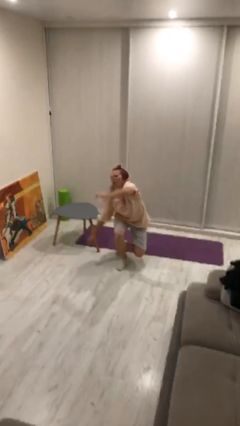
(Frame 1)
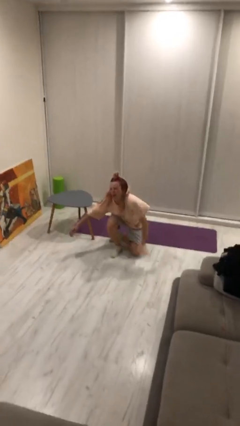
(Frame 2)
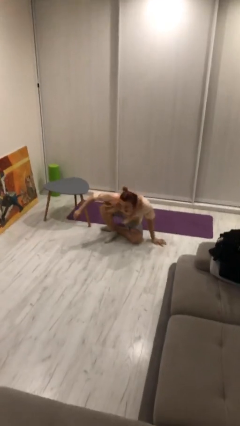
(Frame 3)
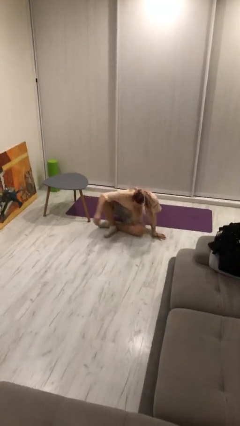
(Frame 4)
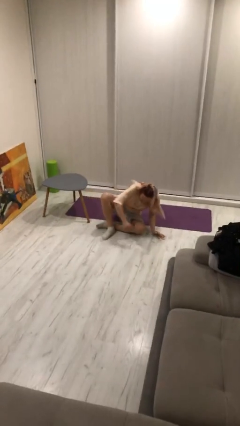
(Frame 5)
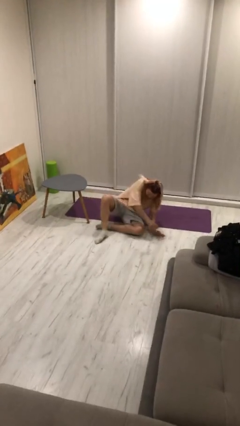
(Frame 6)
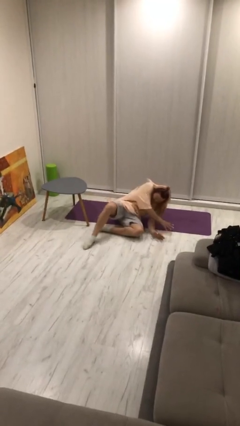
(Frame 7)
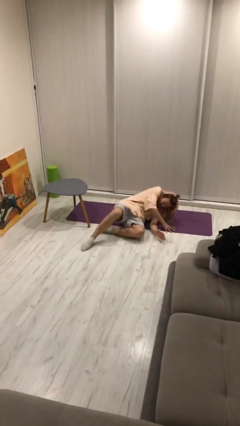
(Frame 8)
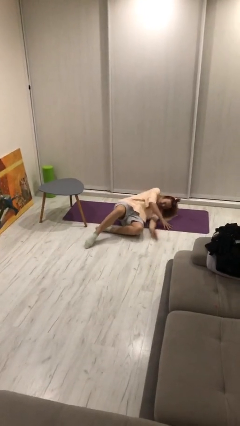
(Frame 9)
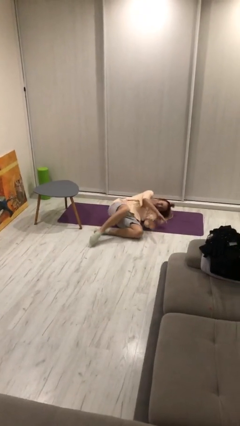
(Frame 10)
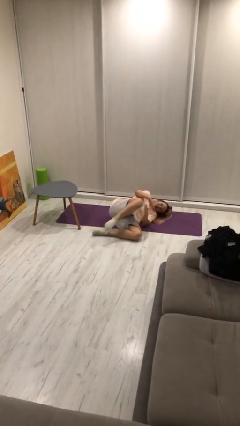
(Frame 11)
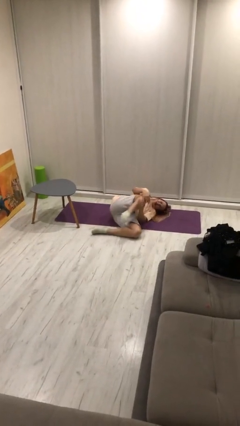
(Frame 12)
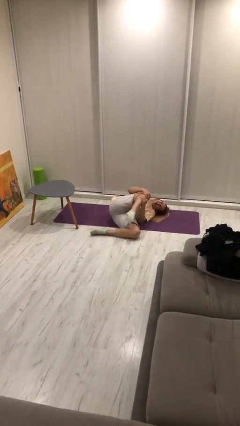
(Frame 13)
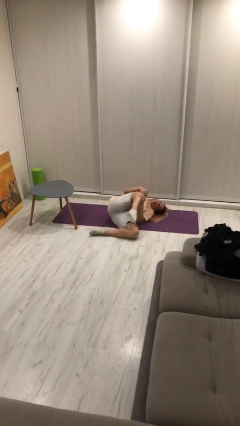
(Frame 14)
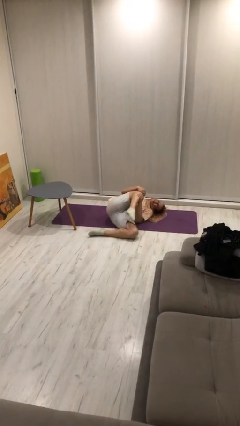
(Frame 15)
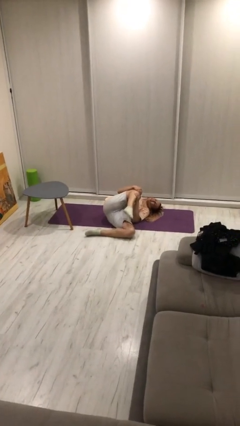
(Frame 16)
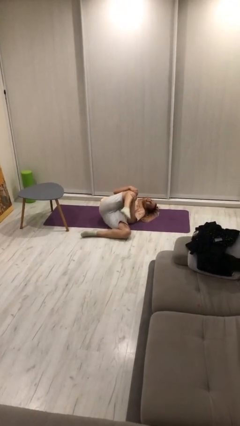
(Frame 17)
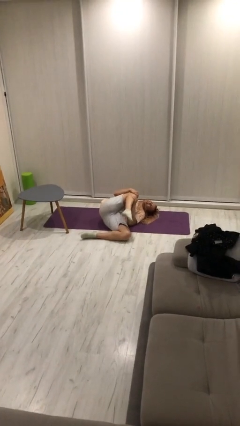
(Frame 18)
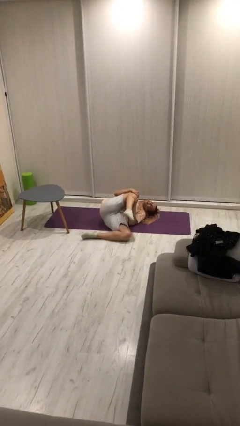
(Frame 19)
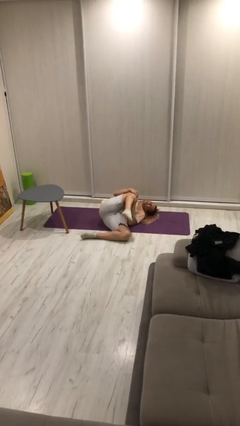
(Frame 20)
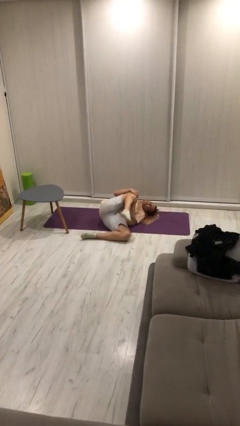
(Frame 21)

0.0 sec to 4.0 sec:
person lies down on floor

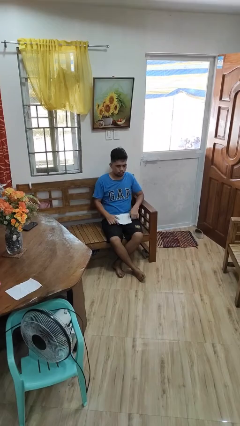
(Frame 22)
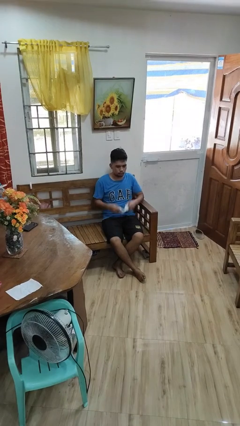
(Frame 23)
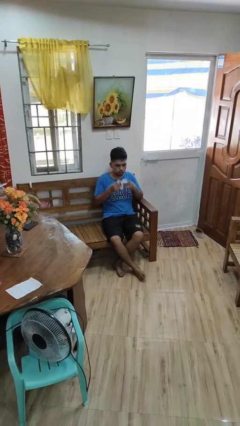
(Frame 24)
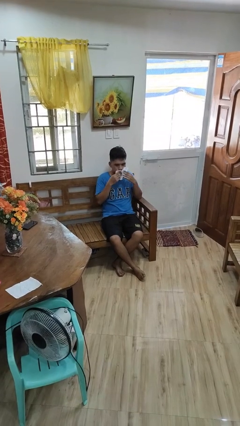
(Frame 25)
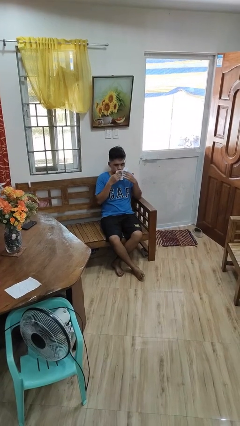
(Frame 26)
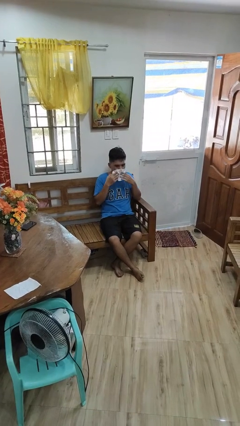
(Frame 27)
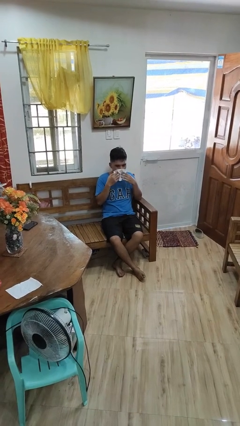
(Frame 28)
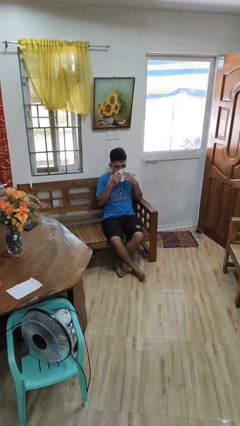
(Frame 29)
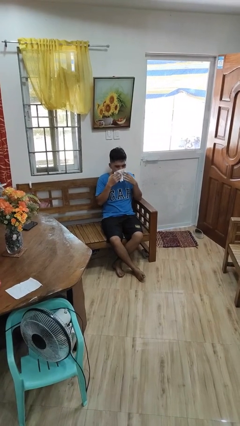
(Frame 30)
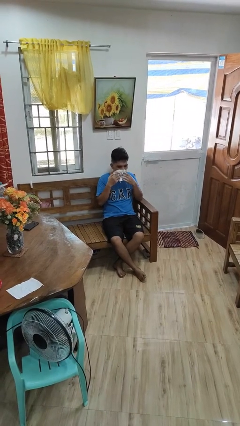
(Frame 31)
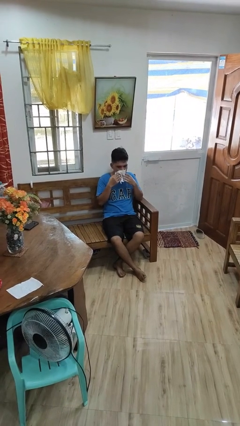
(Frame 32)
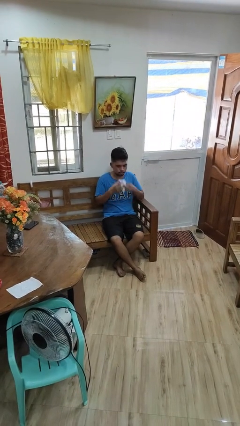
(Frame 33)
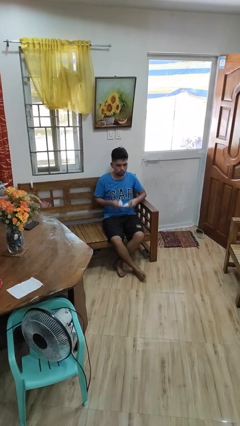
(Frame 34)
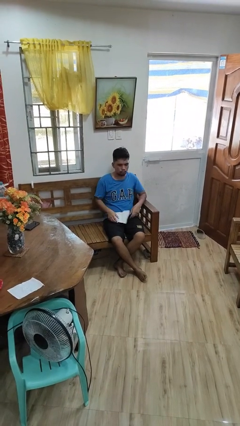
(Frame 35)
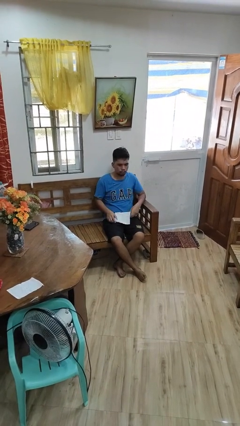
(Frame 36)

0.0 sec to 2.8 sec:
person wipes mouth with napkin

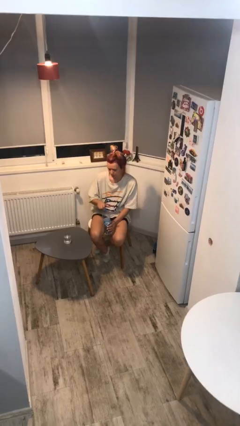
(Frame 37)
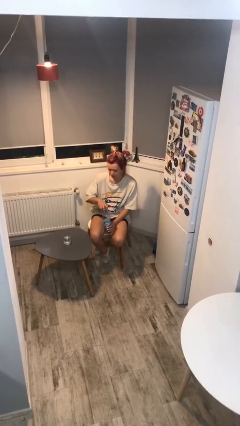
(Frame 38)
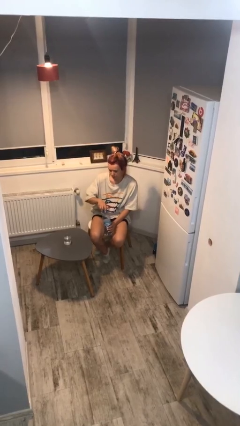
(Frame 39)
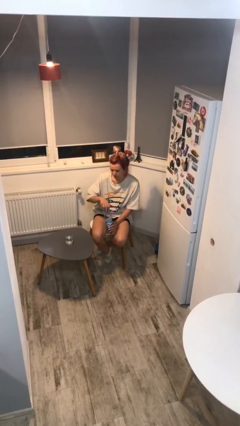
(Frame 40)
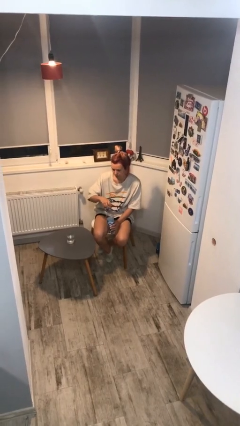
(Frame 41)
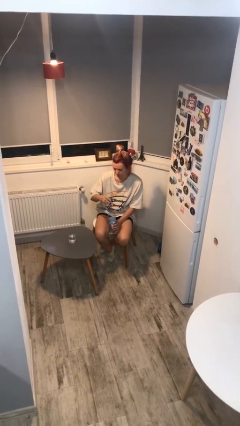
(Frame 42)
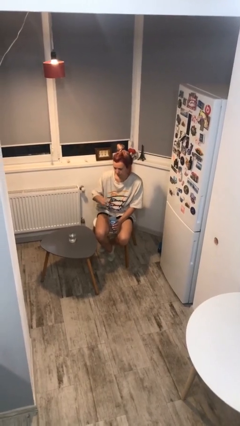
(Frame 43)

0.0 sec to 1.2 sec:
person unscrews lid from bottle

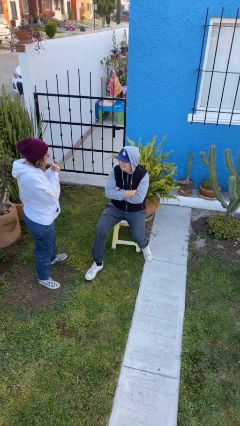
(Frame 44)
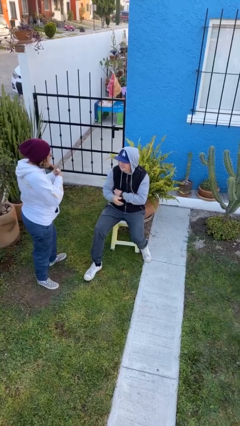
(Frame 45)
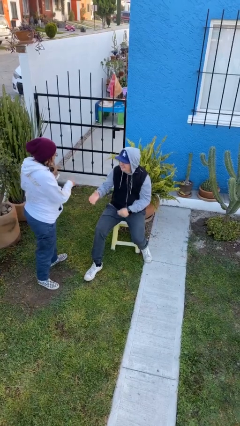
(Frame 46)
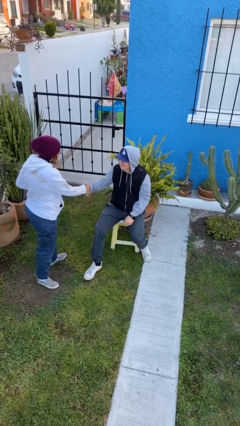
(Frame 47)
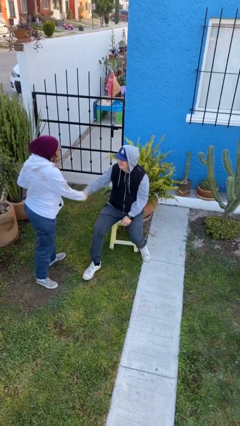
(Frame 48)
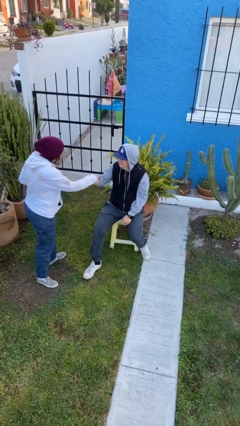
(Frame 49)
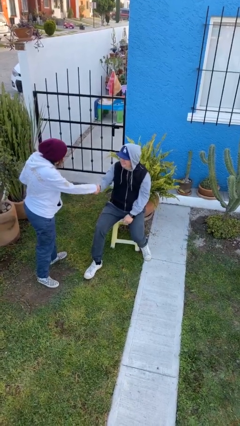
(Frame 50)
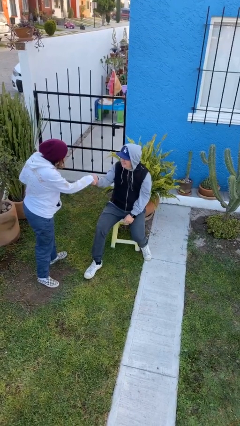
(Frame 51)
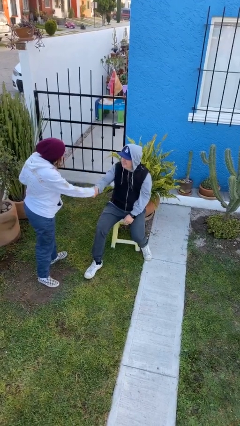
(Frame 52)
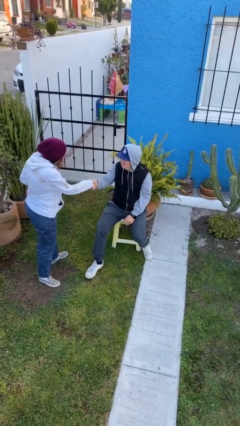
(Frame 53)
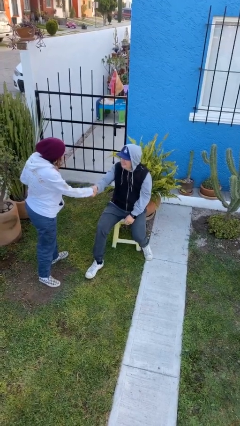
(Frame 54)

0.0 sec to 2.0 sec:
person shakes hand

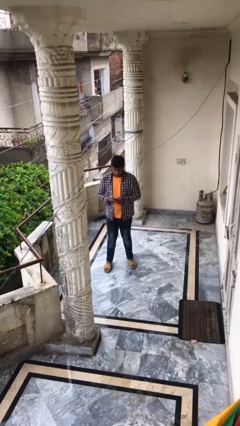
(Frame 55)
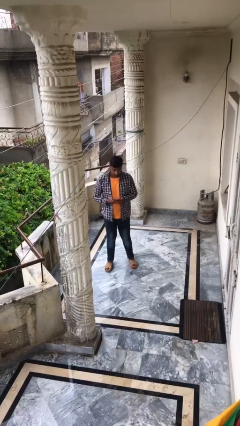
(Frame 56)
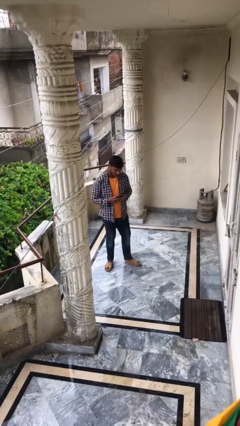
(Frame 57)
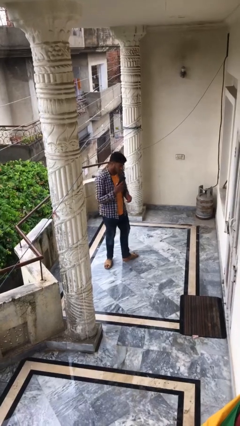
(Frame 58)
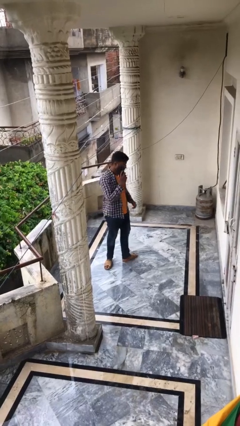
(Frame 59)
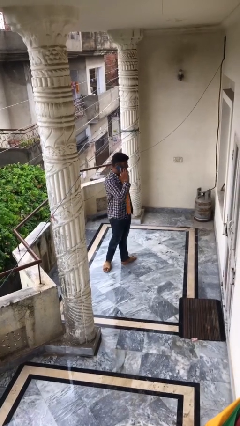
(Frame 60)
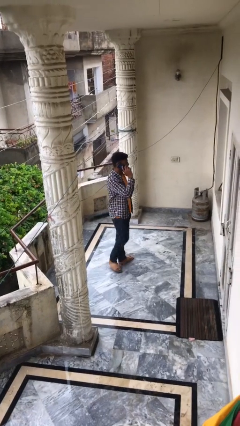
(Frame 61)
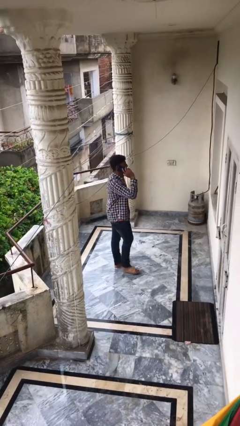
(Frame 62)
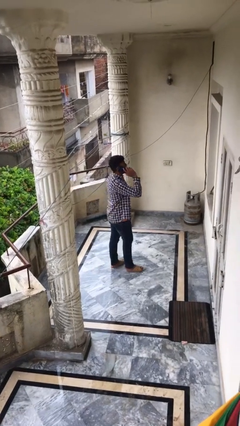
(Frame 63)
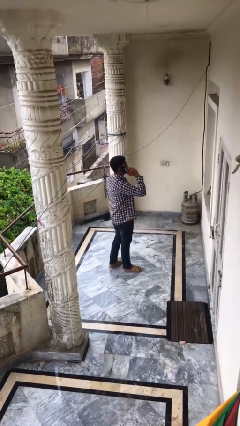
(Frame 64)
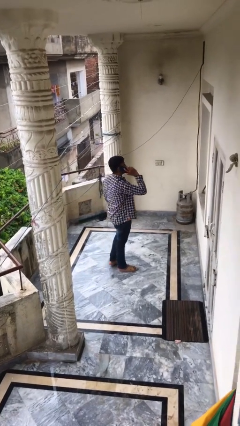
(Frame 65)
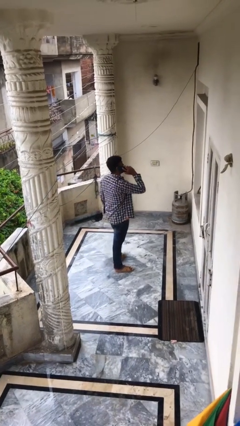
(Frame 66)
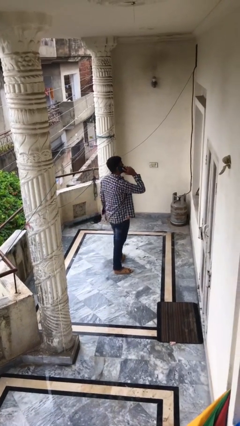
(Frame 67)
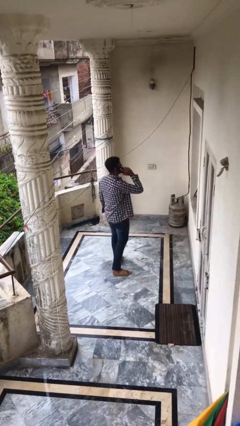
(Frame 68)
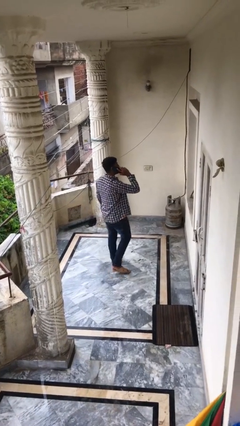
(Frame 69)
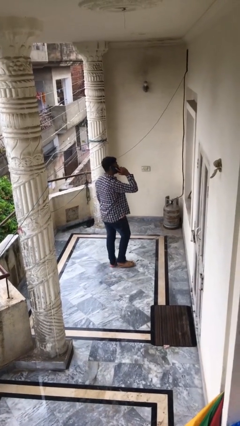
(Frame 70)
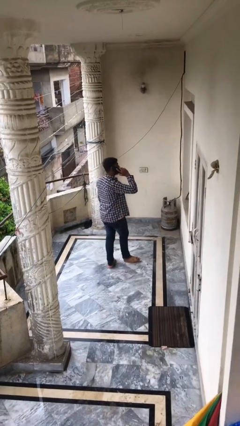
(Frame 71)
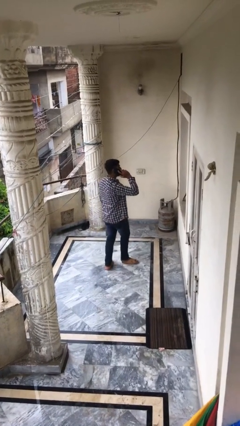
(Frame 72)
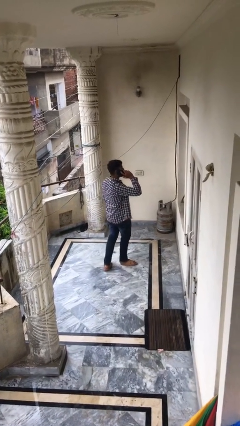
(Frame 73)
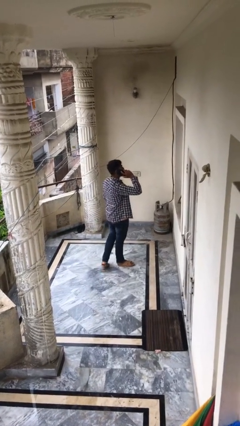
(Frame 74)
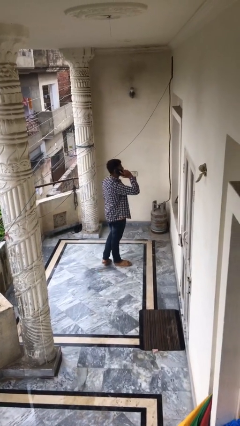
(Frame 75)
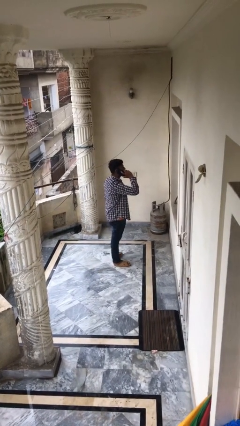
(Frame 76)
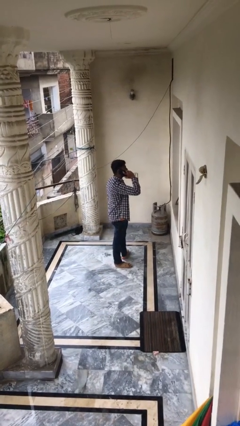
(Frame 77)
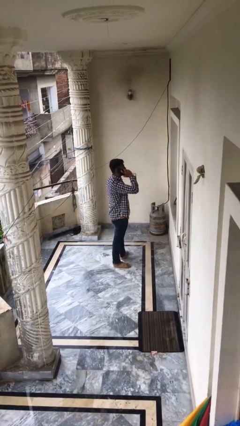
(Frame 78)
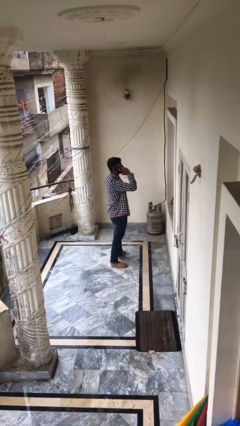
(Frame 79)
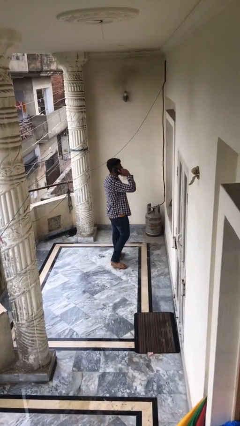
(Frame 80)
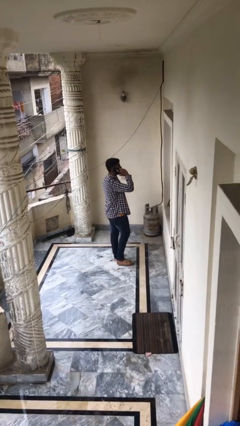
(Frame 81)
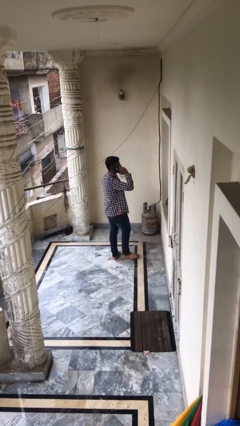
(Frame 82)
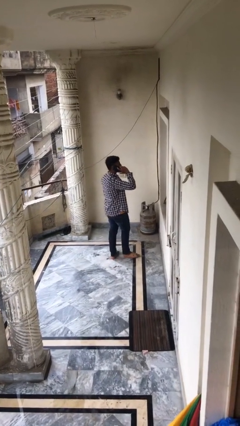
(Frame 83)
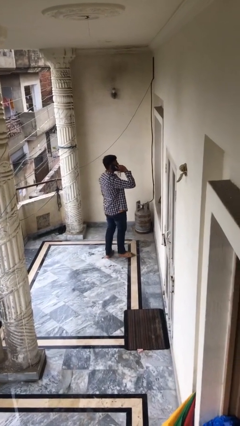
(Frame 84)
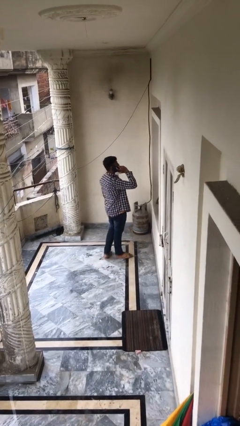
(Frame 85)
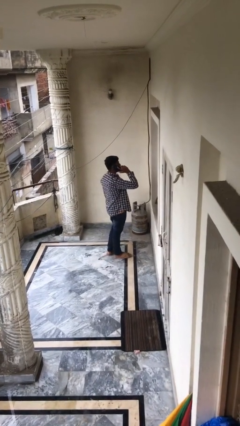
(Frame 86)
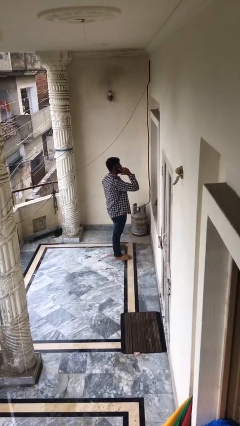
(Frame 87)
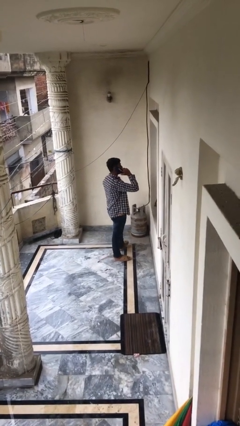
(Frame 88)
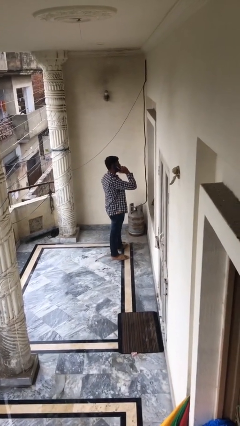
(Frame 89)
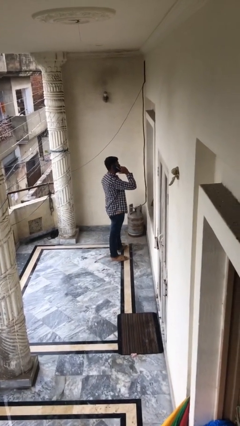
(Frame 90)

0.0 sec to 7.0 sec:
person talks on phone

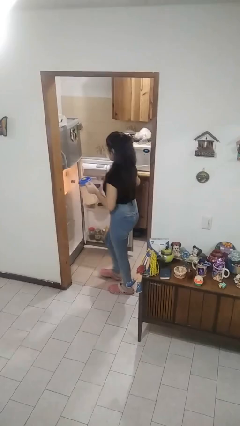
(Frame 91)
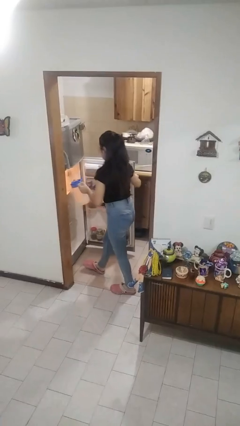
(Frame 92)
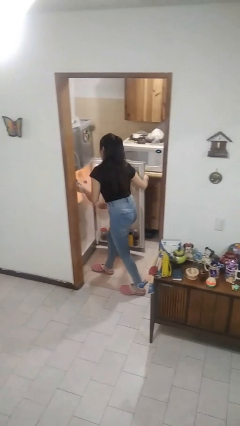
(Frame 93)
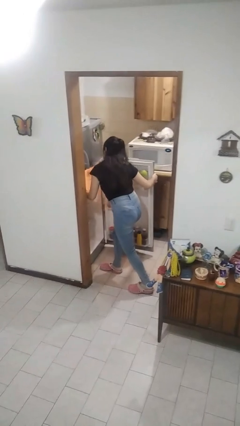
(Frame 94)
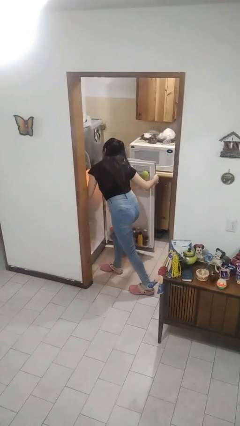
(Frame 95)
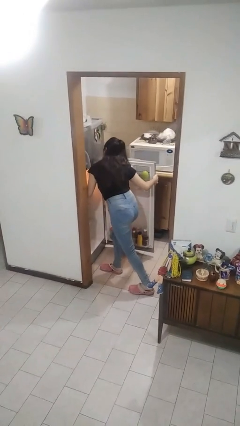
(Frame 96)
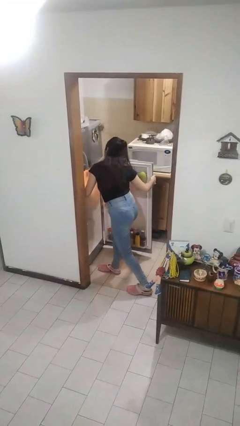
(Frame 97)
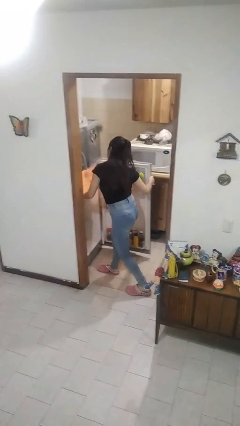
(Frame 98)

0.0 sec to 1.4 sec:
person puts object into refrigerator
